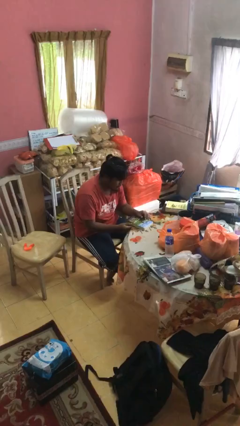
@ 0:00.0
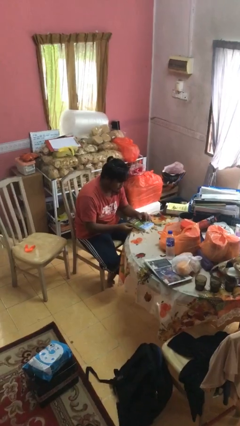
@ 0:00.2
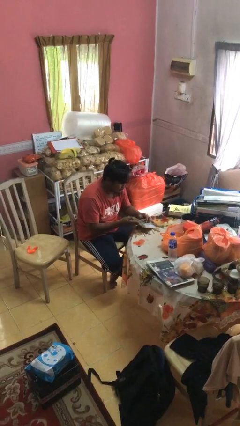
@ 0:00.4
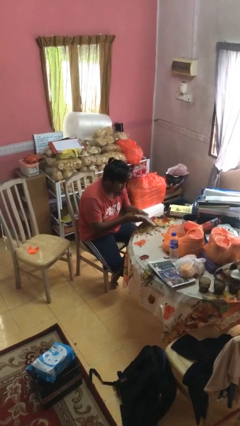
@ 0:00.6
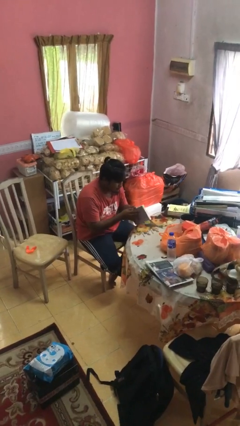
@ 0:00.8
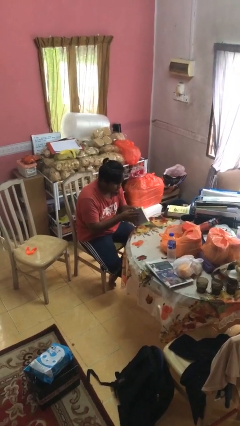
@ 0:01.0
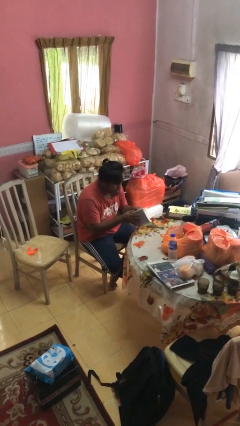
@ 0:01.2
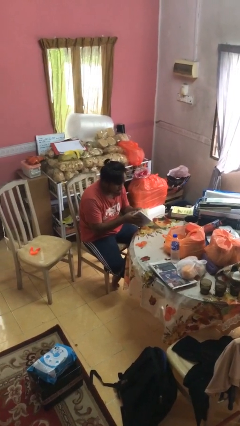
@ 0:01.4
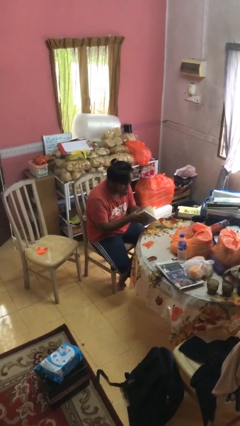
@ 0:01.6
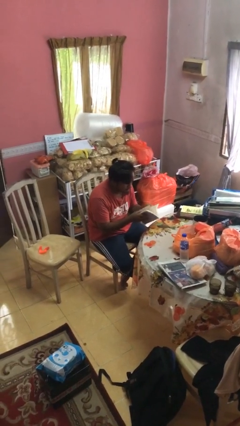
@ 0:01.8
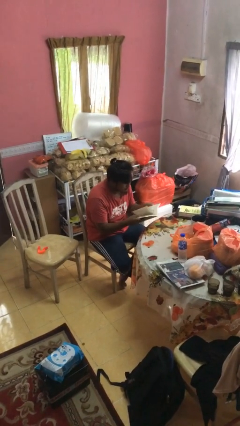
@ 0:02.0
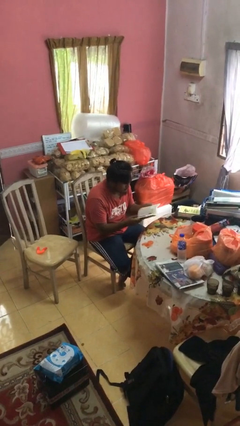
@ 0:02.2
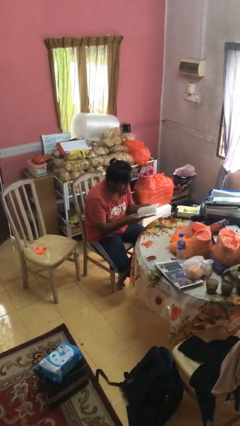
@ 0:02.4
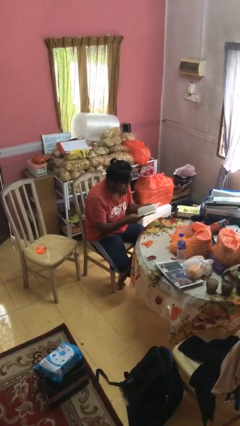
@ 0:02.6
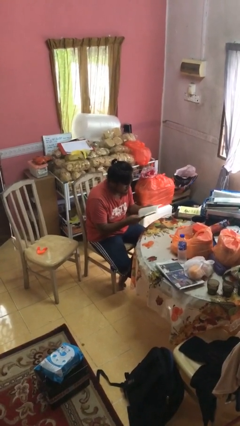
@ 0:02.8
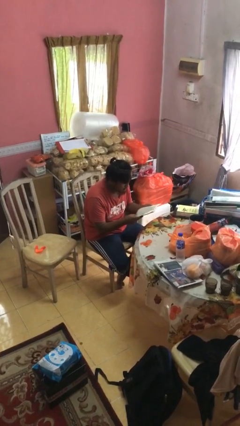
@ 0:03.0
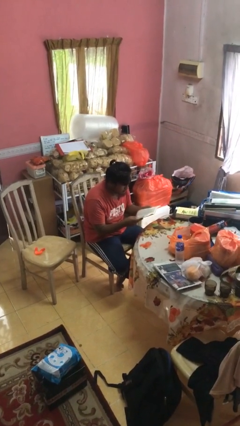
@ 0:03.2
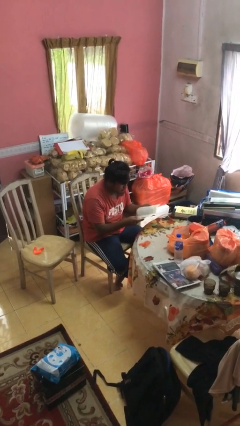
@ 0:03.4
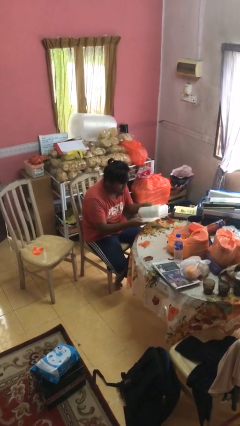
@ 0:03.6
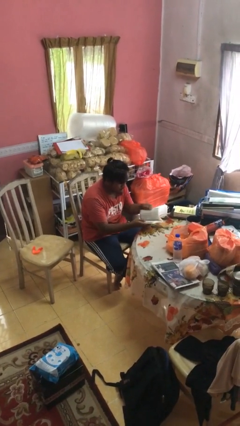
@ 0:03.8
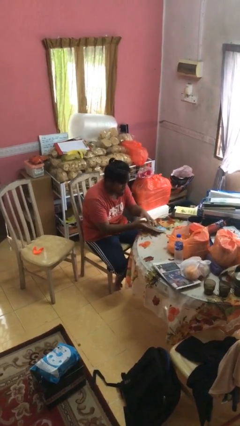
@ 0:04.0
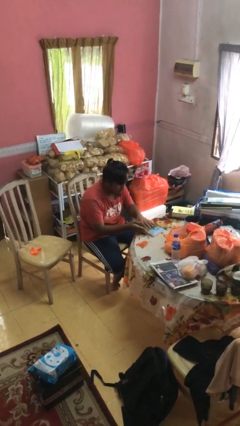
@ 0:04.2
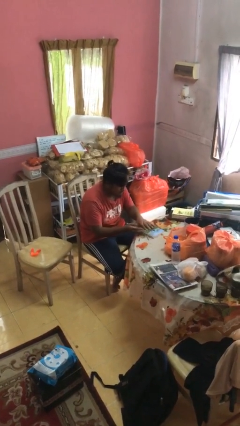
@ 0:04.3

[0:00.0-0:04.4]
person reads book

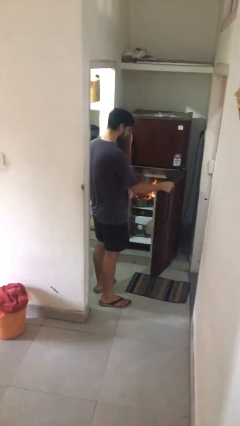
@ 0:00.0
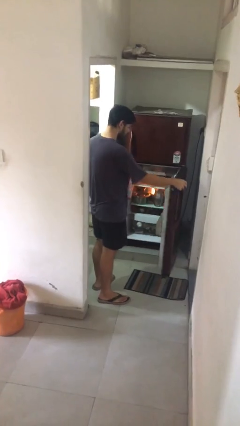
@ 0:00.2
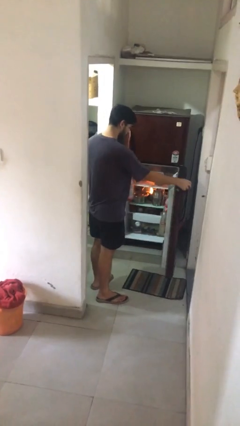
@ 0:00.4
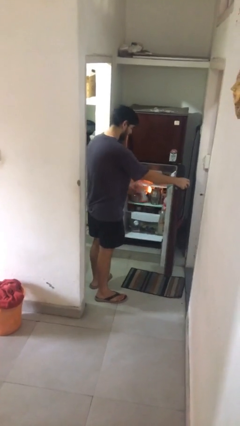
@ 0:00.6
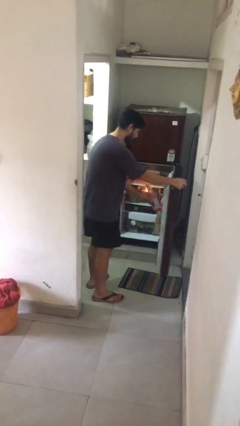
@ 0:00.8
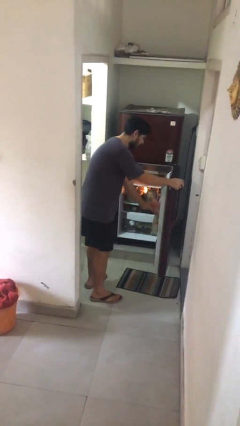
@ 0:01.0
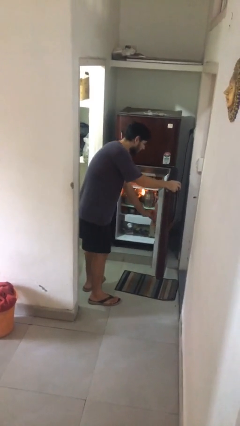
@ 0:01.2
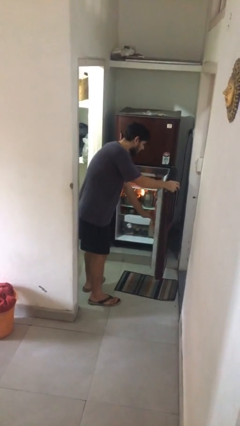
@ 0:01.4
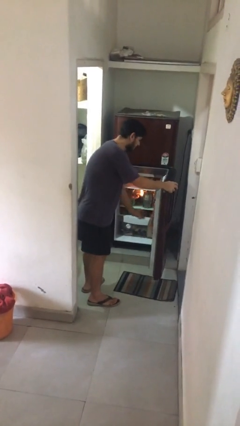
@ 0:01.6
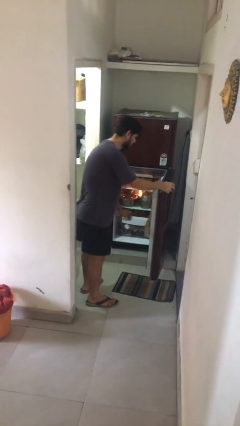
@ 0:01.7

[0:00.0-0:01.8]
person puts object into refrigerator

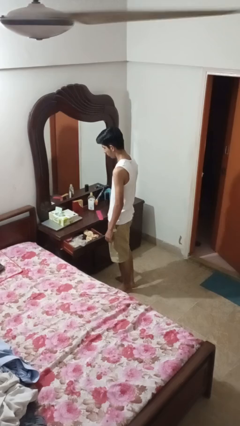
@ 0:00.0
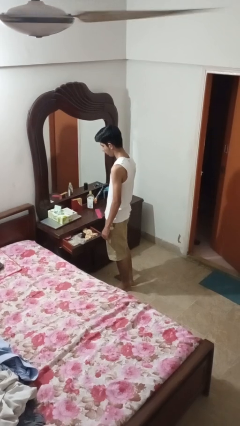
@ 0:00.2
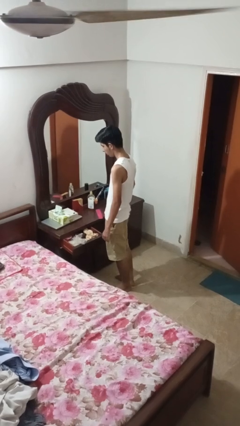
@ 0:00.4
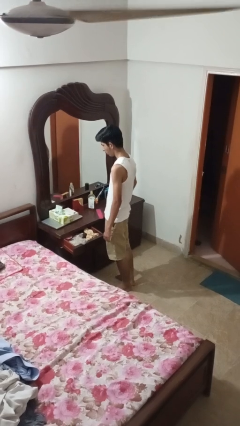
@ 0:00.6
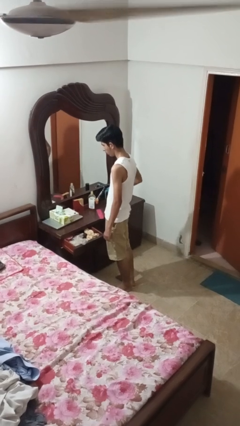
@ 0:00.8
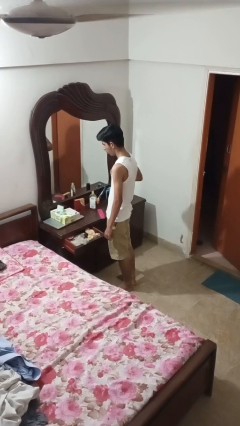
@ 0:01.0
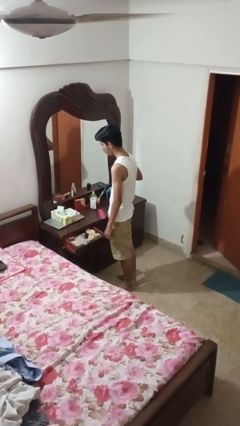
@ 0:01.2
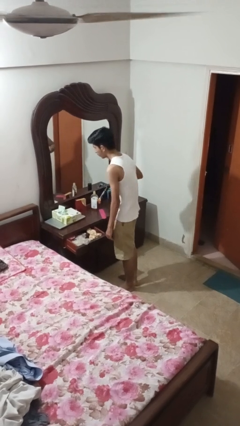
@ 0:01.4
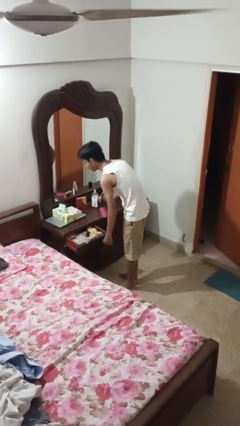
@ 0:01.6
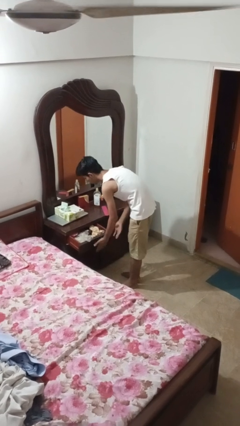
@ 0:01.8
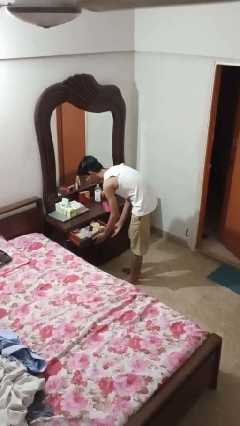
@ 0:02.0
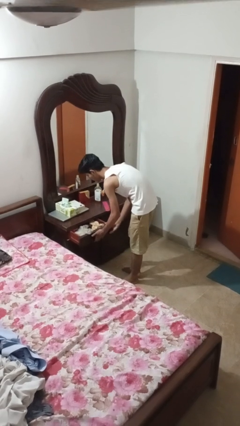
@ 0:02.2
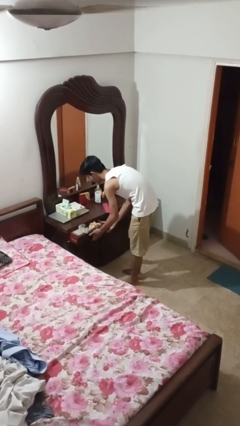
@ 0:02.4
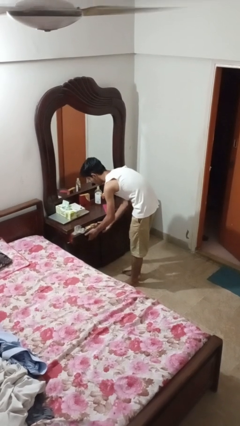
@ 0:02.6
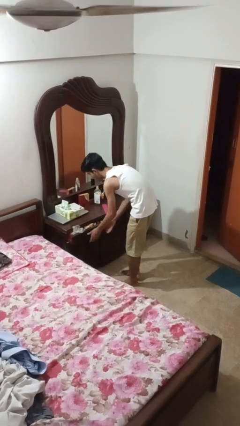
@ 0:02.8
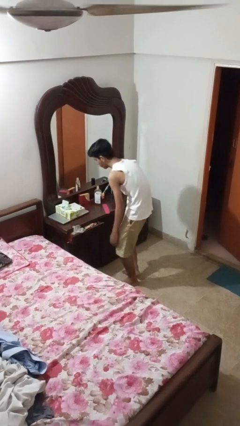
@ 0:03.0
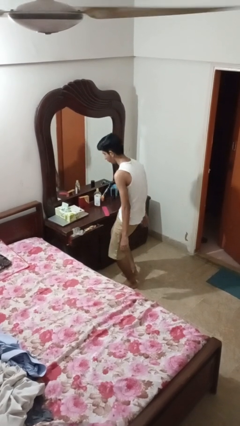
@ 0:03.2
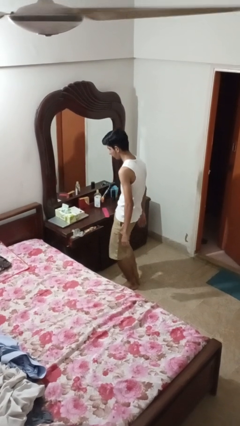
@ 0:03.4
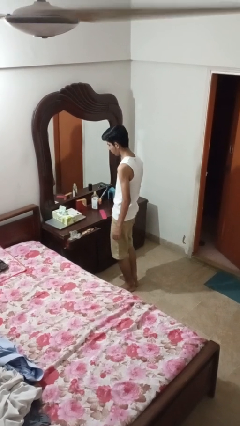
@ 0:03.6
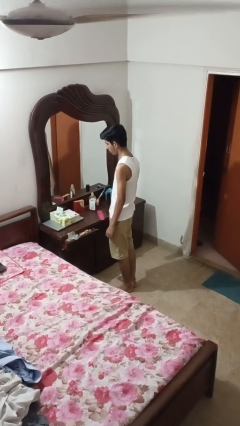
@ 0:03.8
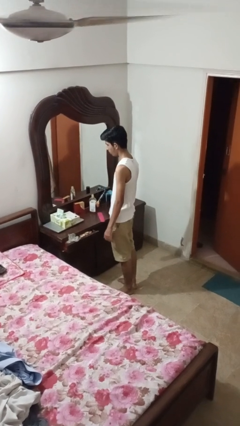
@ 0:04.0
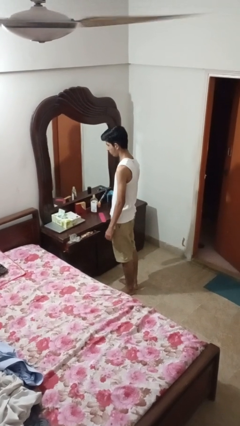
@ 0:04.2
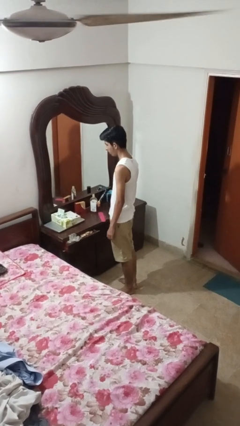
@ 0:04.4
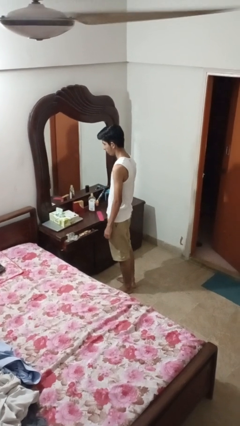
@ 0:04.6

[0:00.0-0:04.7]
person closes dresser drawer

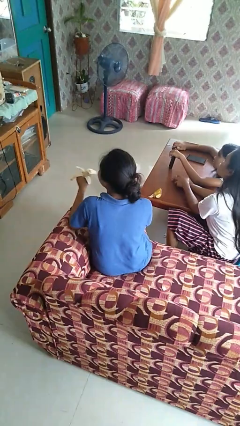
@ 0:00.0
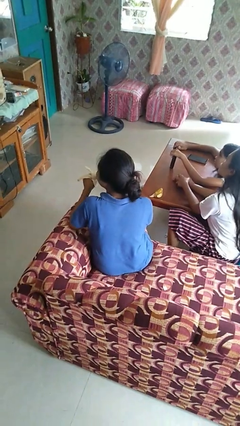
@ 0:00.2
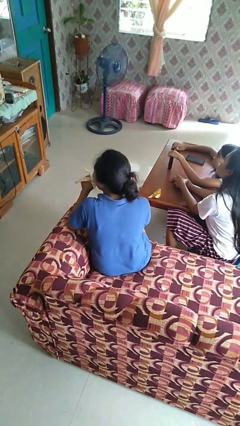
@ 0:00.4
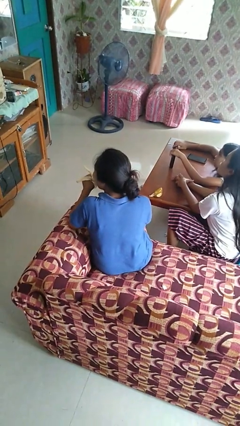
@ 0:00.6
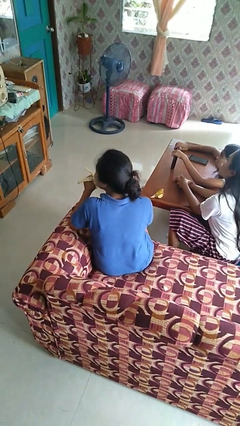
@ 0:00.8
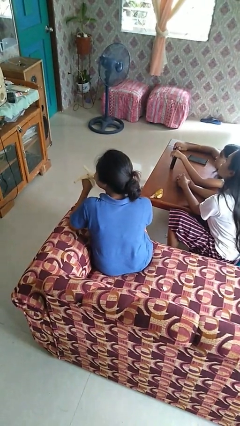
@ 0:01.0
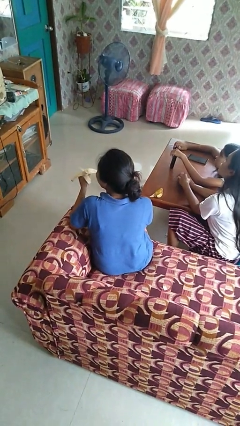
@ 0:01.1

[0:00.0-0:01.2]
person eats banana

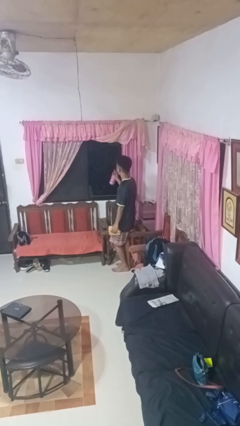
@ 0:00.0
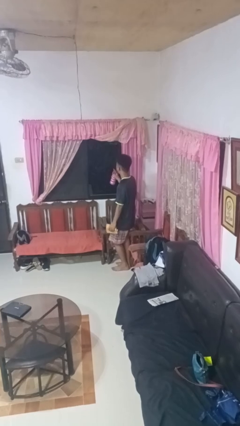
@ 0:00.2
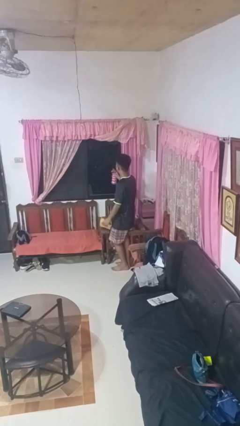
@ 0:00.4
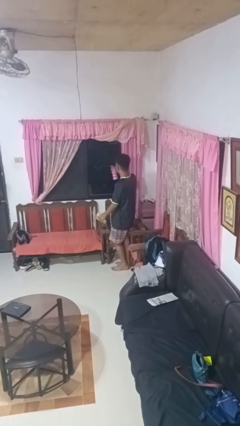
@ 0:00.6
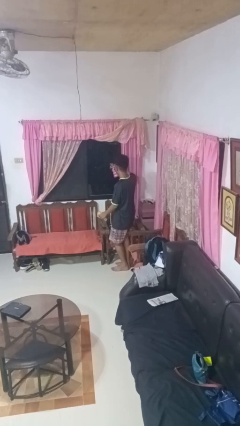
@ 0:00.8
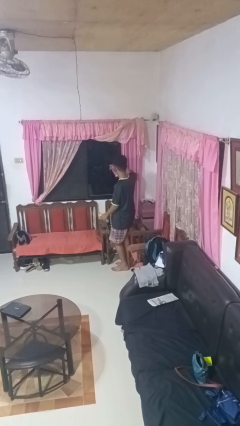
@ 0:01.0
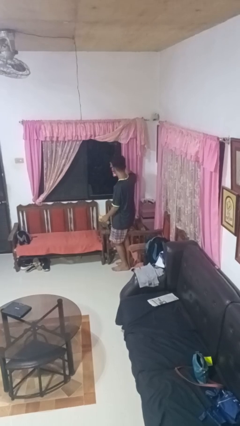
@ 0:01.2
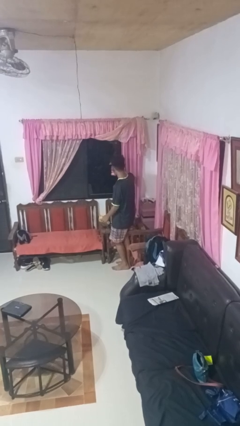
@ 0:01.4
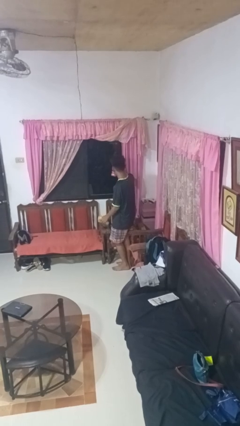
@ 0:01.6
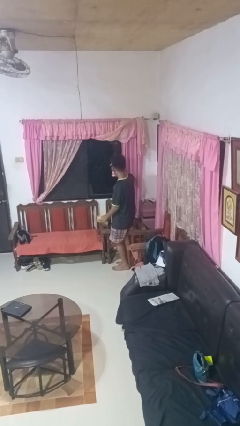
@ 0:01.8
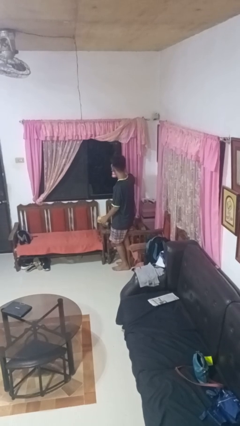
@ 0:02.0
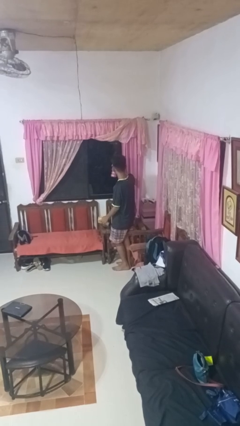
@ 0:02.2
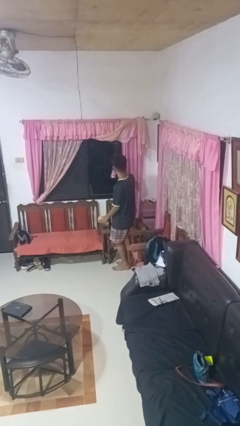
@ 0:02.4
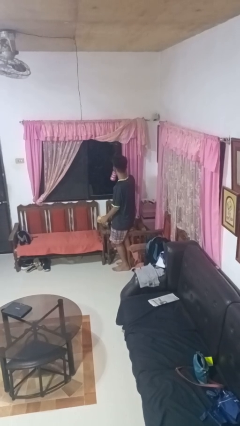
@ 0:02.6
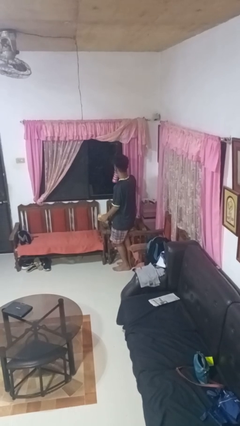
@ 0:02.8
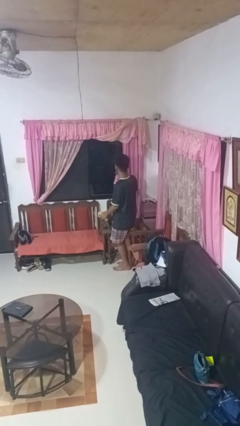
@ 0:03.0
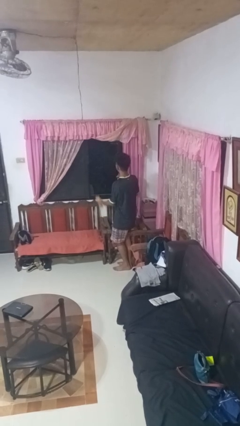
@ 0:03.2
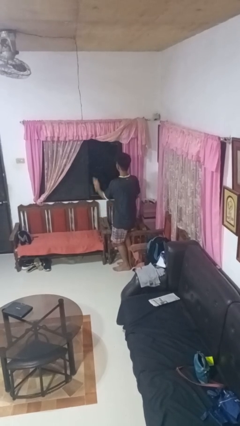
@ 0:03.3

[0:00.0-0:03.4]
person sprays from bottle

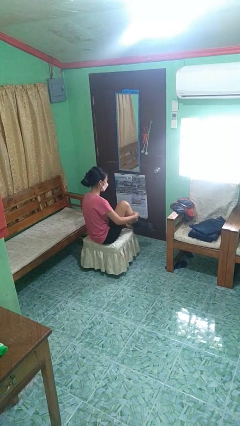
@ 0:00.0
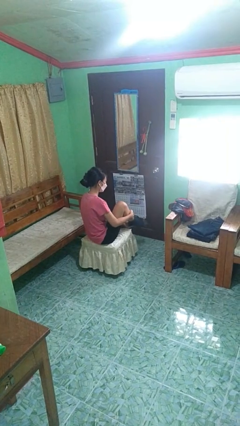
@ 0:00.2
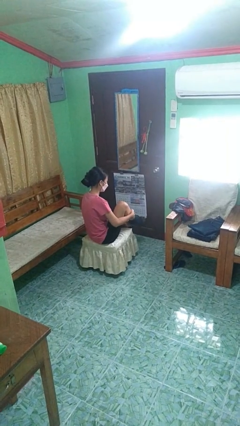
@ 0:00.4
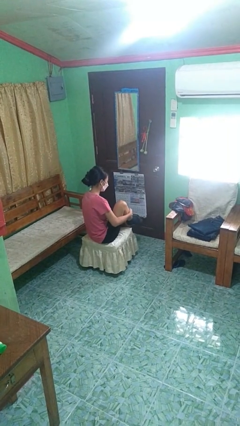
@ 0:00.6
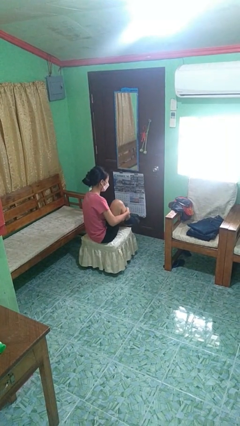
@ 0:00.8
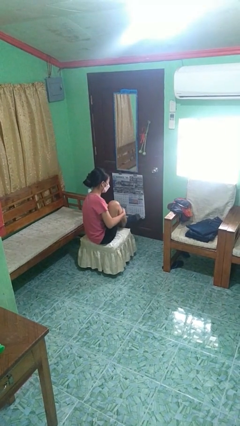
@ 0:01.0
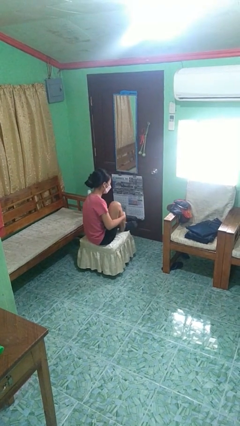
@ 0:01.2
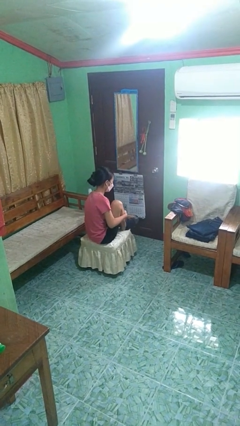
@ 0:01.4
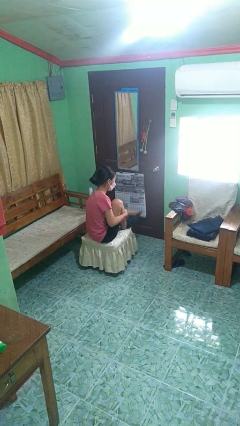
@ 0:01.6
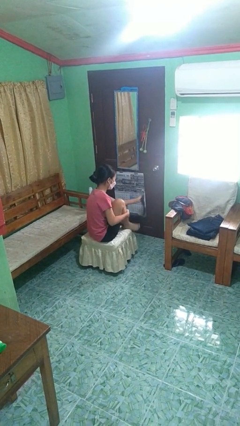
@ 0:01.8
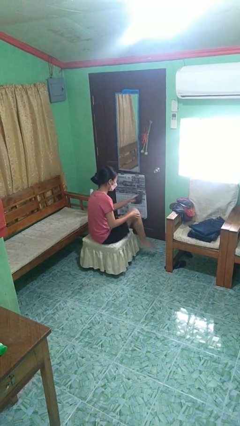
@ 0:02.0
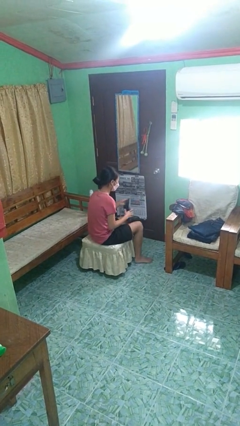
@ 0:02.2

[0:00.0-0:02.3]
person takes off socks
